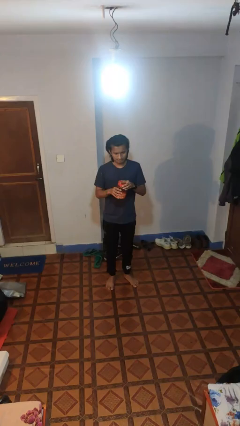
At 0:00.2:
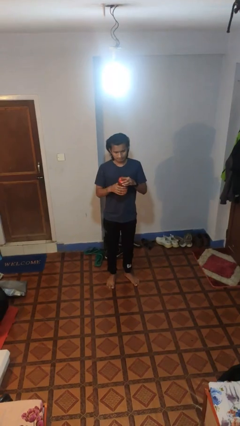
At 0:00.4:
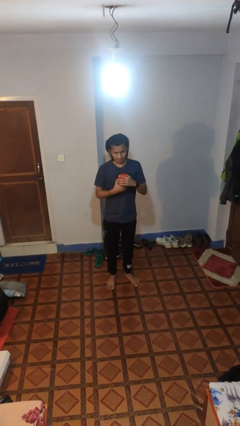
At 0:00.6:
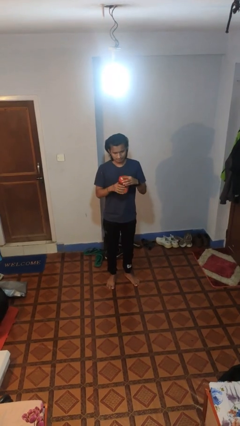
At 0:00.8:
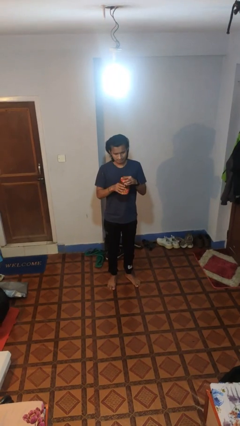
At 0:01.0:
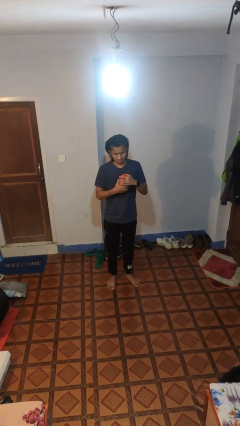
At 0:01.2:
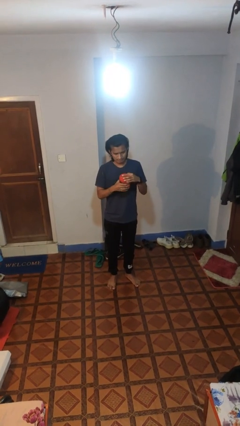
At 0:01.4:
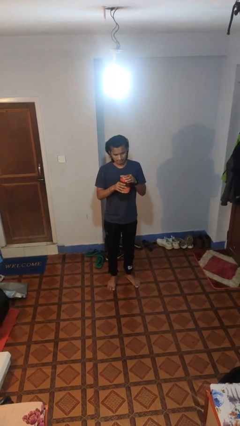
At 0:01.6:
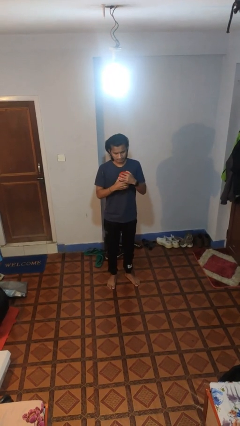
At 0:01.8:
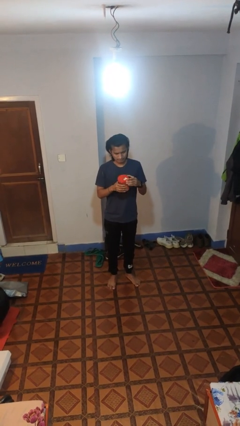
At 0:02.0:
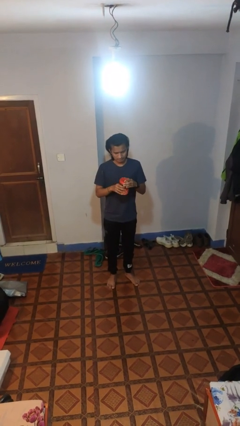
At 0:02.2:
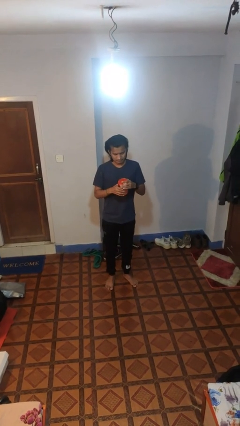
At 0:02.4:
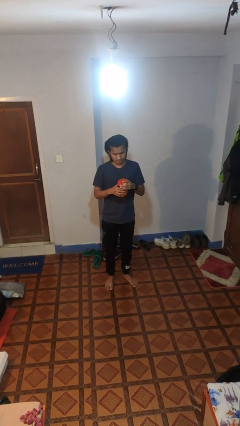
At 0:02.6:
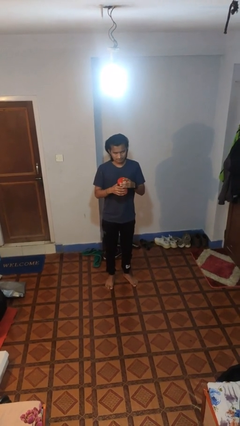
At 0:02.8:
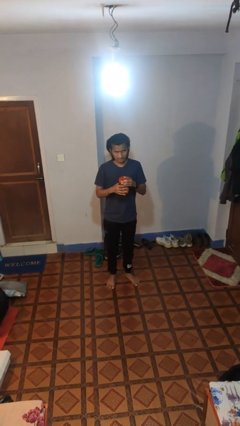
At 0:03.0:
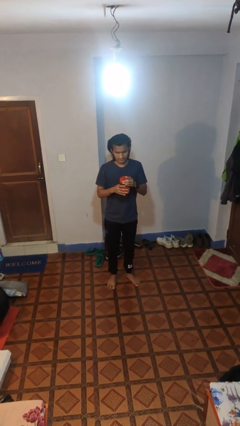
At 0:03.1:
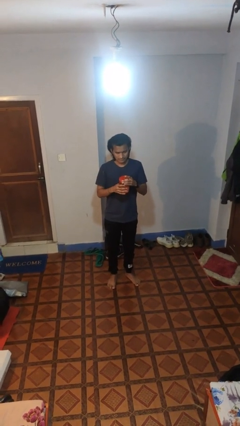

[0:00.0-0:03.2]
person closes jar

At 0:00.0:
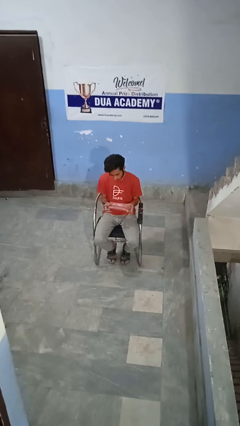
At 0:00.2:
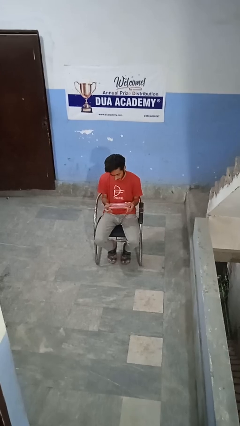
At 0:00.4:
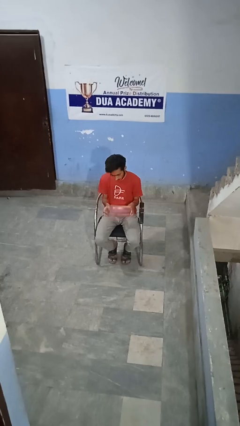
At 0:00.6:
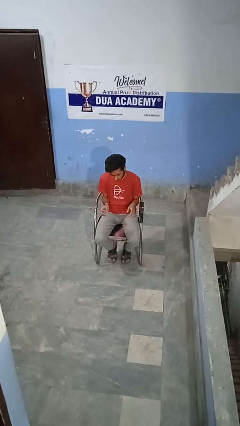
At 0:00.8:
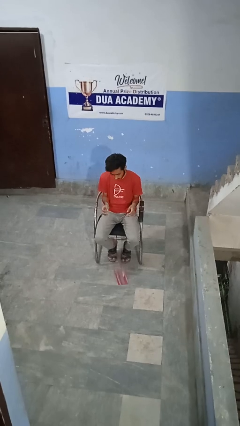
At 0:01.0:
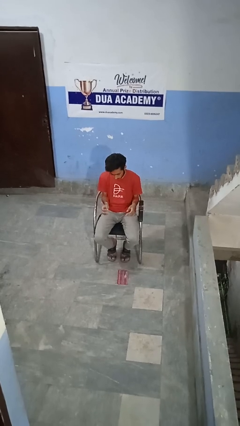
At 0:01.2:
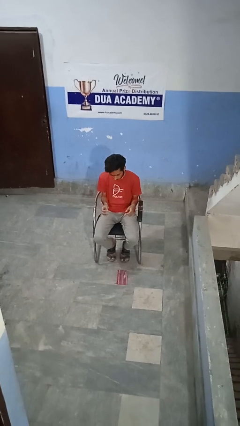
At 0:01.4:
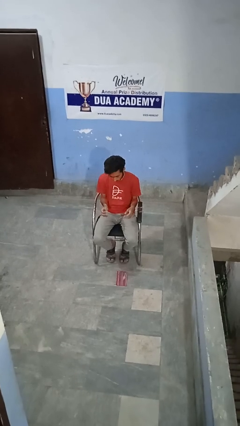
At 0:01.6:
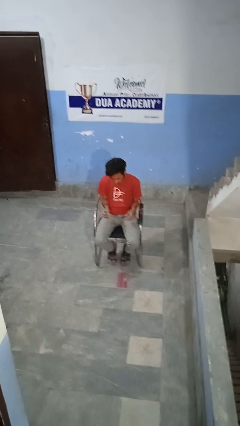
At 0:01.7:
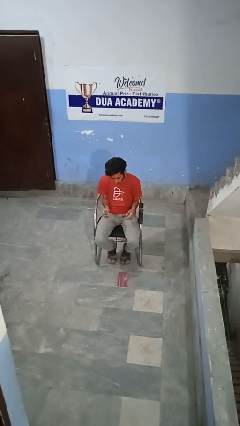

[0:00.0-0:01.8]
person drops object

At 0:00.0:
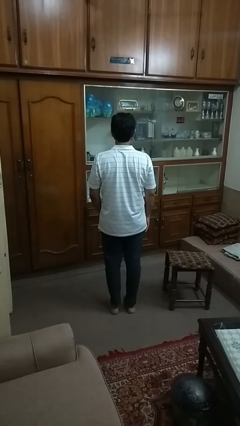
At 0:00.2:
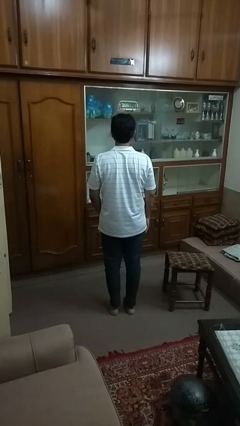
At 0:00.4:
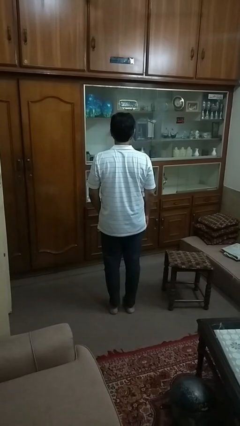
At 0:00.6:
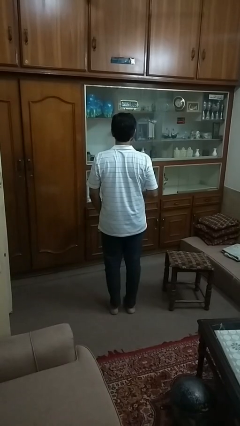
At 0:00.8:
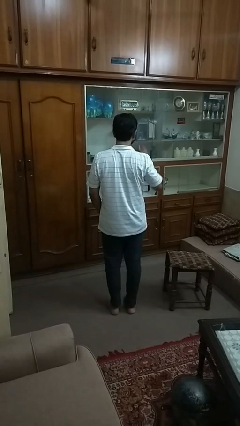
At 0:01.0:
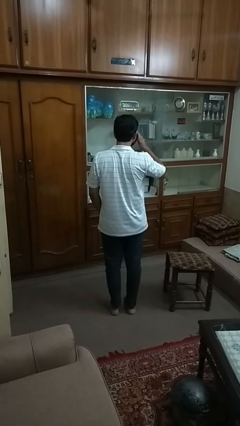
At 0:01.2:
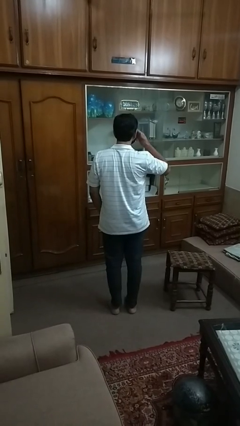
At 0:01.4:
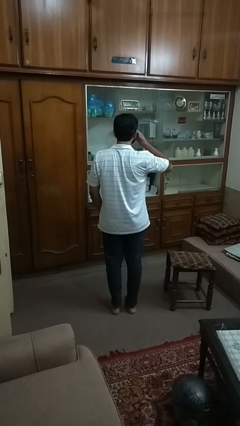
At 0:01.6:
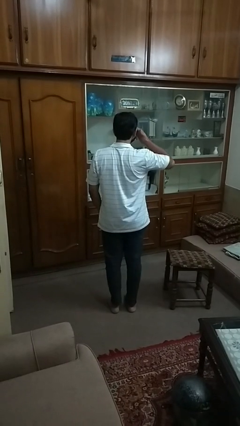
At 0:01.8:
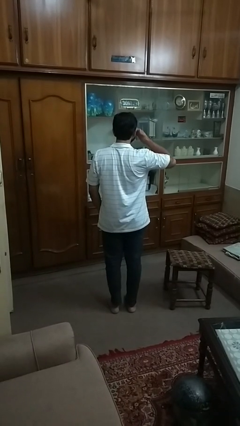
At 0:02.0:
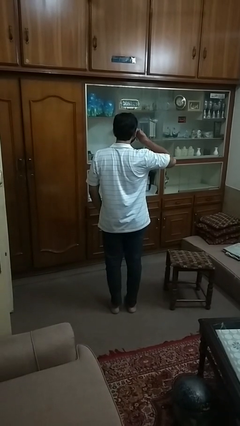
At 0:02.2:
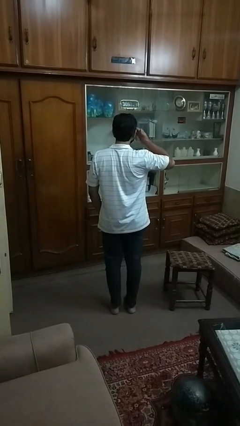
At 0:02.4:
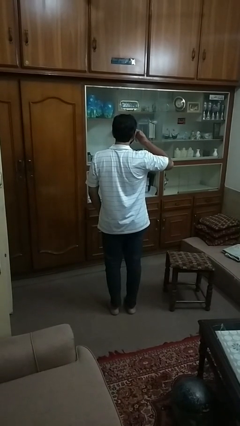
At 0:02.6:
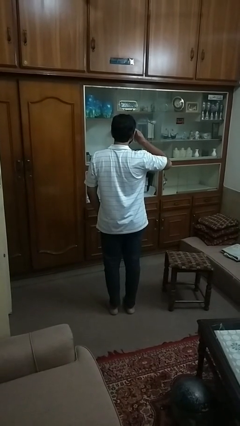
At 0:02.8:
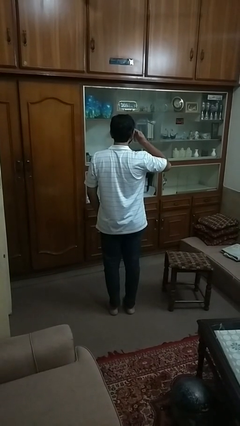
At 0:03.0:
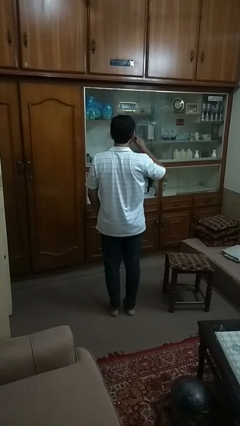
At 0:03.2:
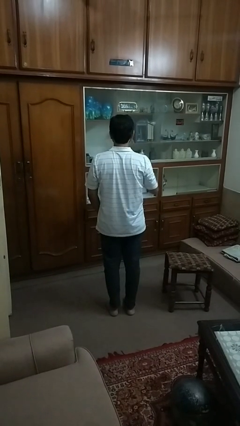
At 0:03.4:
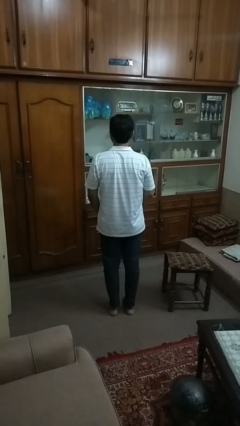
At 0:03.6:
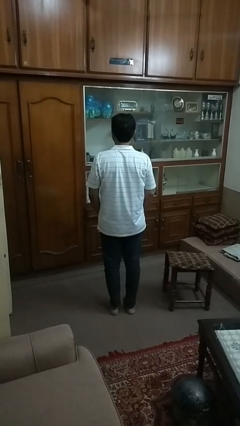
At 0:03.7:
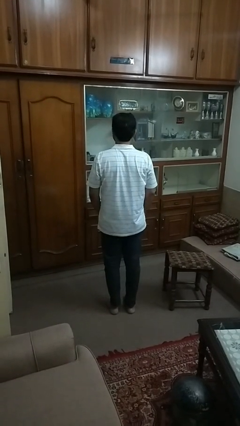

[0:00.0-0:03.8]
person rubs eyes

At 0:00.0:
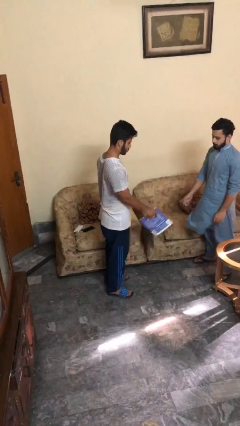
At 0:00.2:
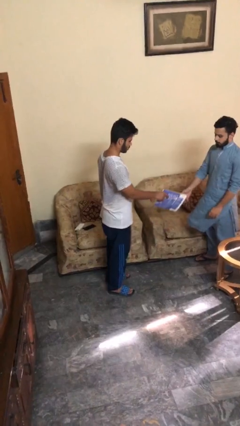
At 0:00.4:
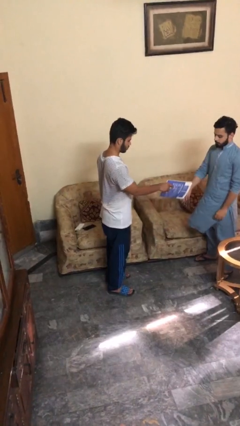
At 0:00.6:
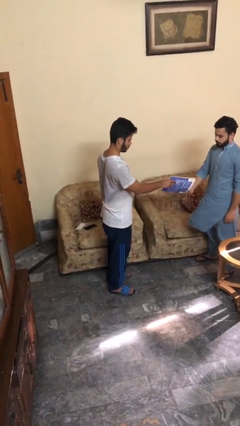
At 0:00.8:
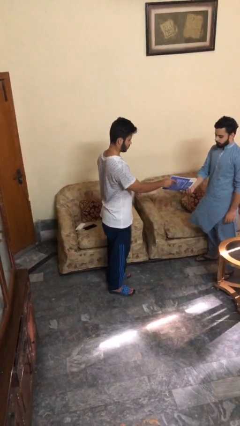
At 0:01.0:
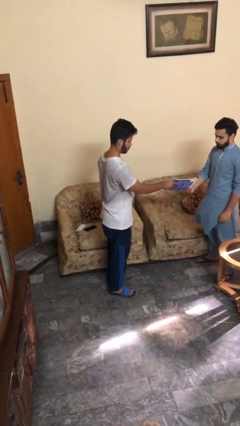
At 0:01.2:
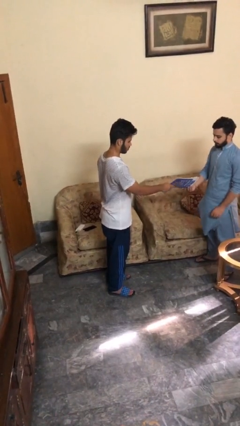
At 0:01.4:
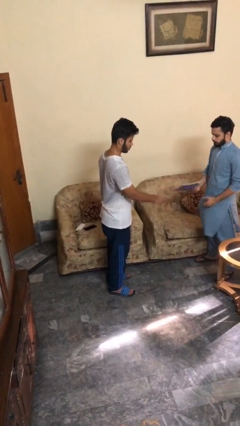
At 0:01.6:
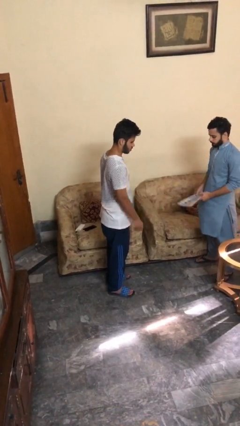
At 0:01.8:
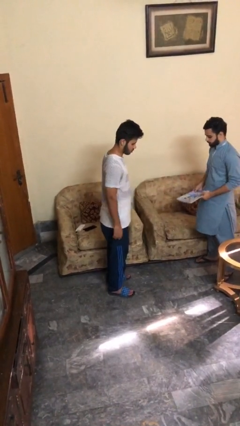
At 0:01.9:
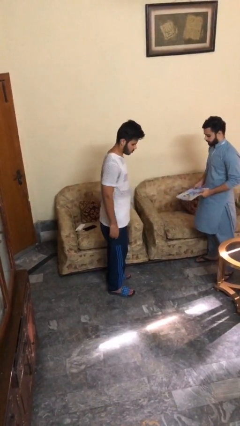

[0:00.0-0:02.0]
person transfers object to person

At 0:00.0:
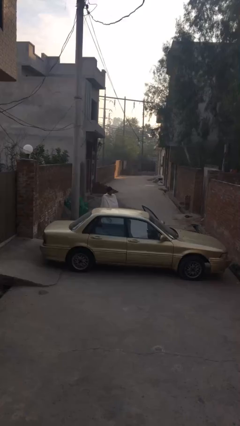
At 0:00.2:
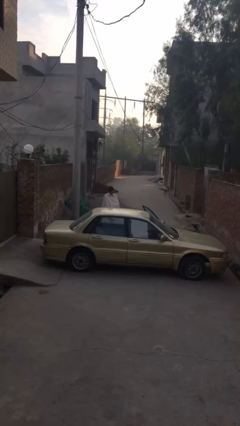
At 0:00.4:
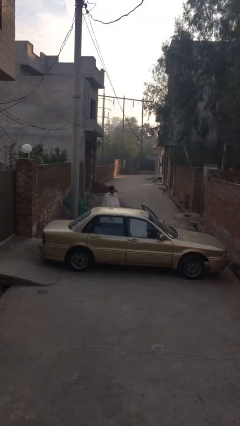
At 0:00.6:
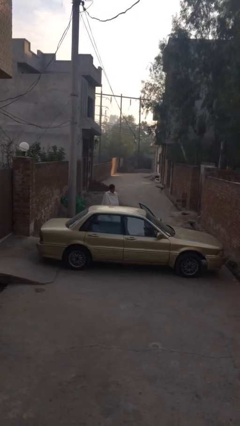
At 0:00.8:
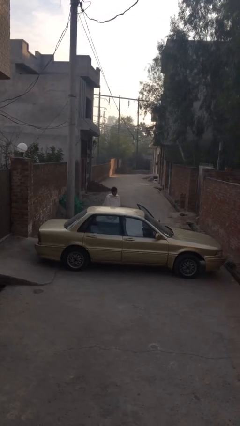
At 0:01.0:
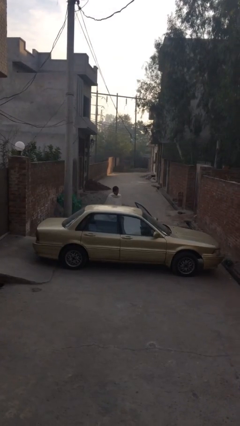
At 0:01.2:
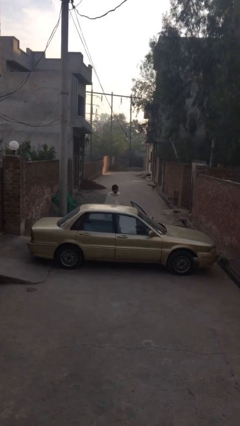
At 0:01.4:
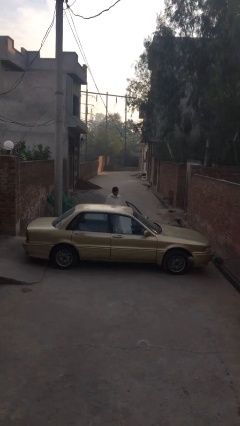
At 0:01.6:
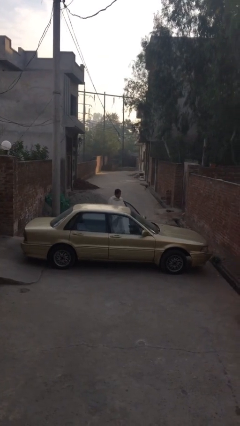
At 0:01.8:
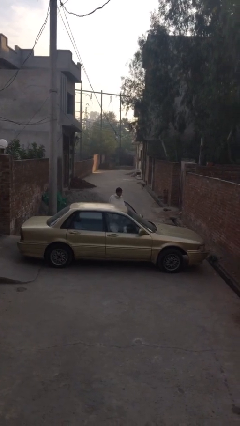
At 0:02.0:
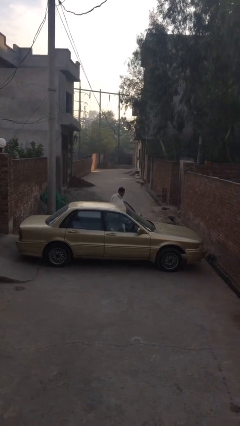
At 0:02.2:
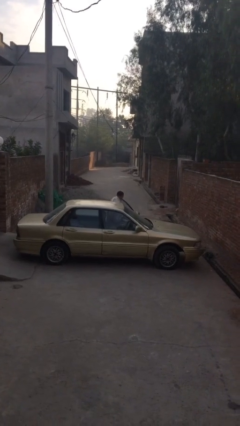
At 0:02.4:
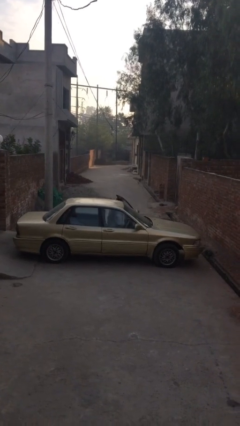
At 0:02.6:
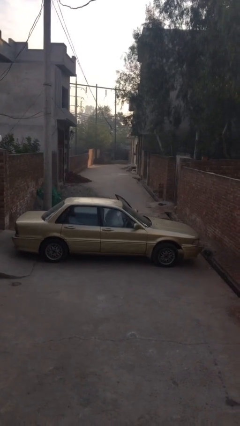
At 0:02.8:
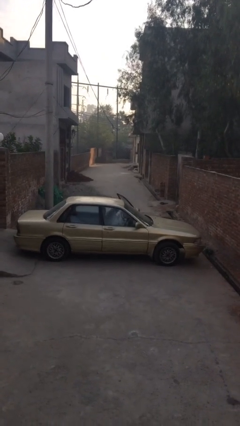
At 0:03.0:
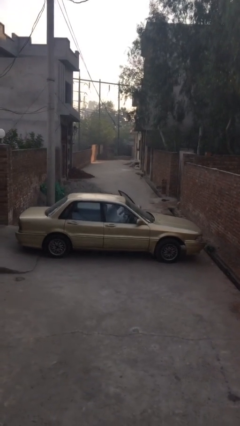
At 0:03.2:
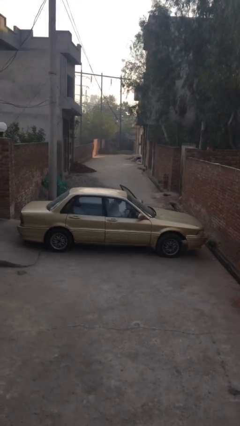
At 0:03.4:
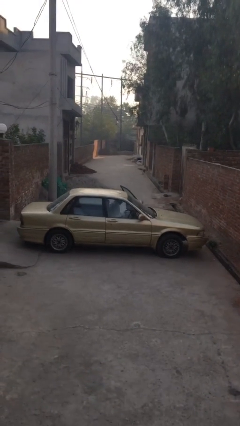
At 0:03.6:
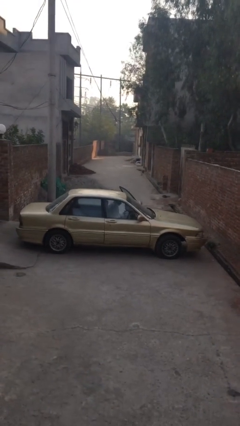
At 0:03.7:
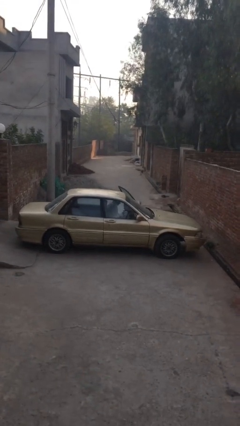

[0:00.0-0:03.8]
person enters car

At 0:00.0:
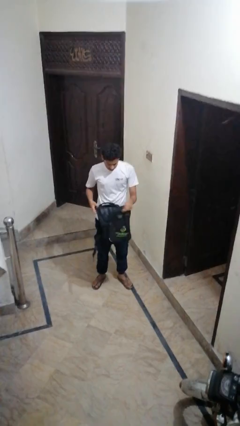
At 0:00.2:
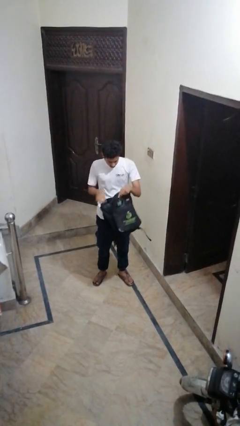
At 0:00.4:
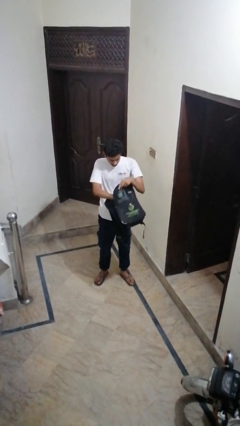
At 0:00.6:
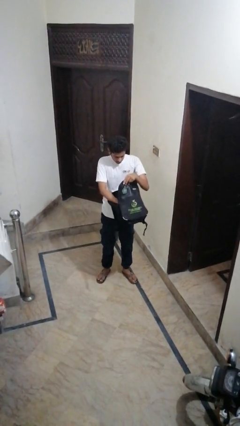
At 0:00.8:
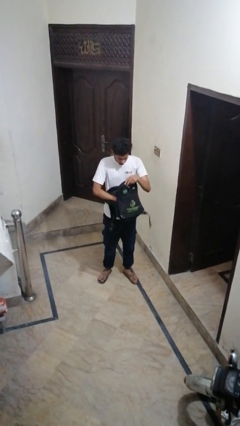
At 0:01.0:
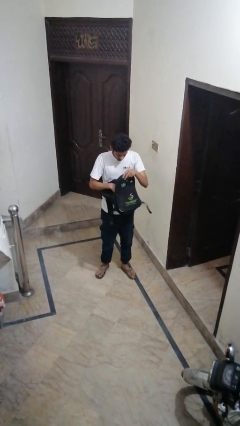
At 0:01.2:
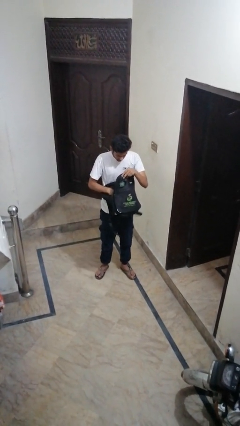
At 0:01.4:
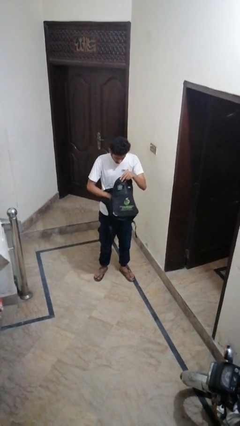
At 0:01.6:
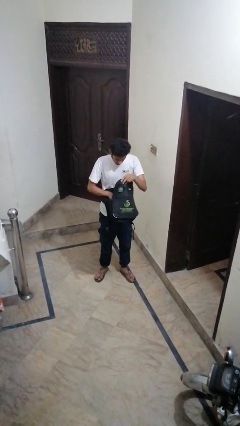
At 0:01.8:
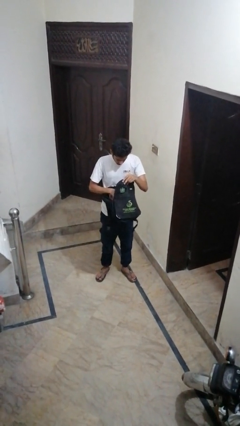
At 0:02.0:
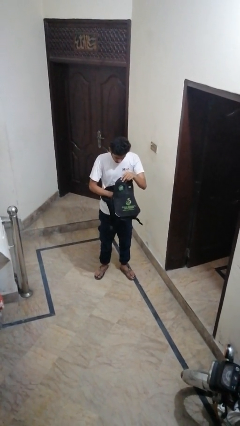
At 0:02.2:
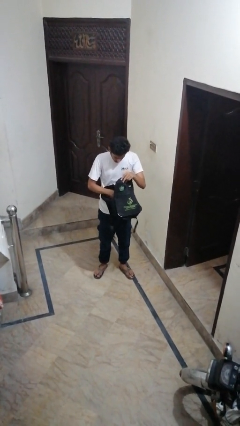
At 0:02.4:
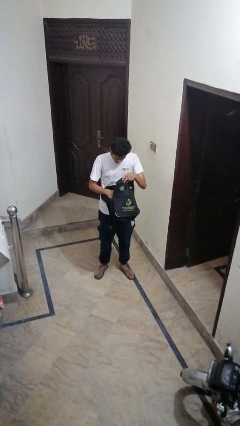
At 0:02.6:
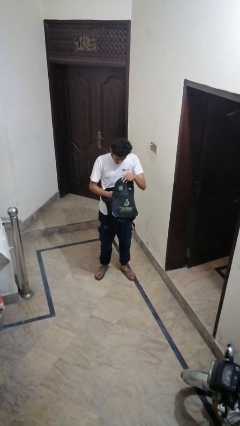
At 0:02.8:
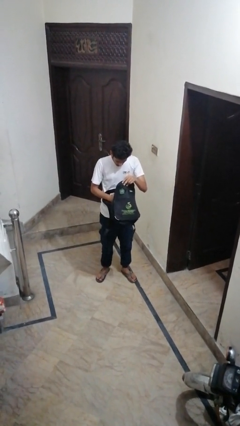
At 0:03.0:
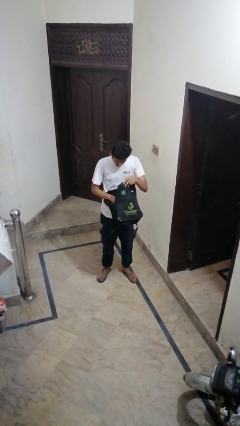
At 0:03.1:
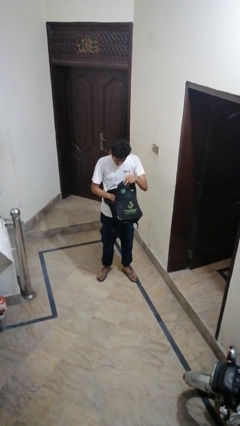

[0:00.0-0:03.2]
person searches in backpack
